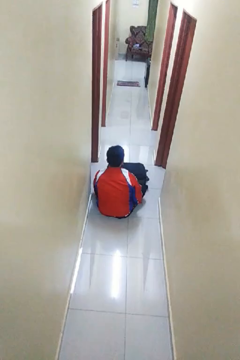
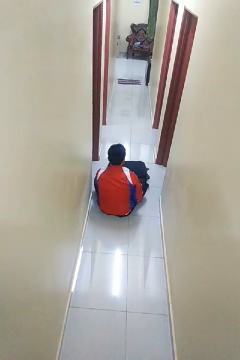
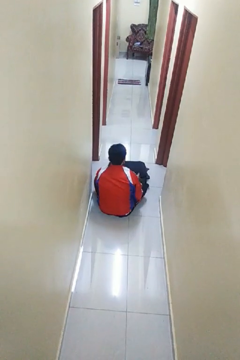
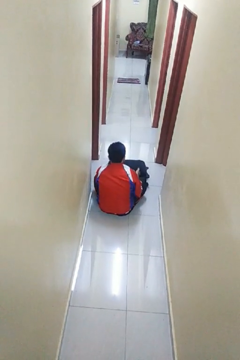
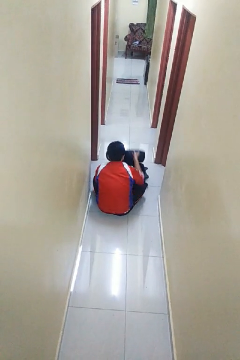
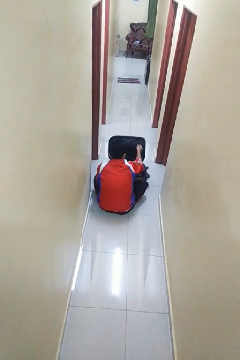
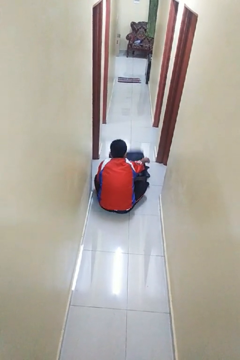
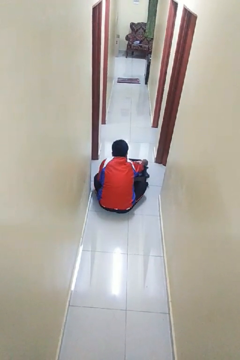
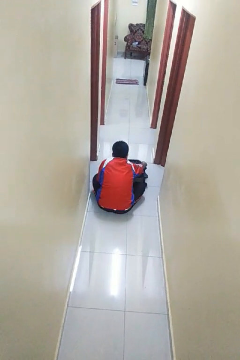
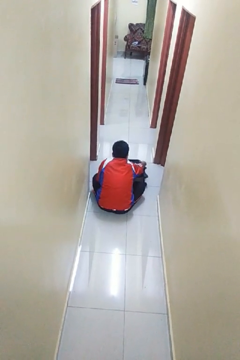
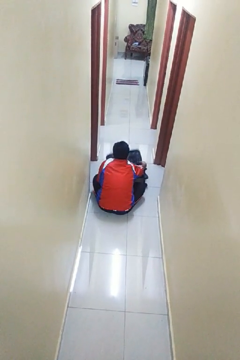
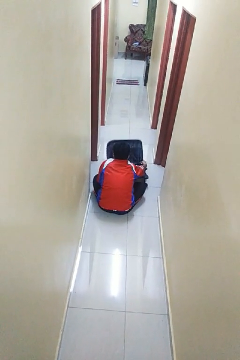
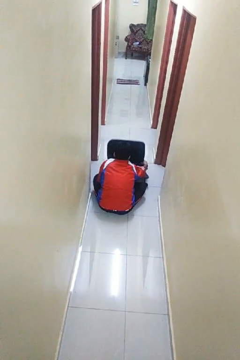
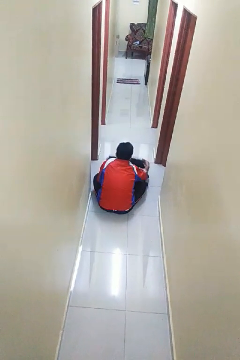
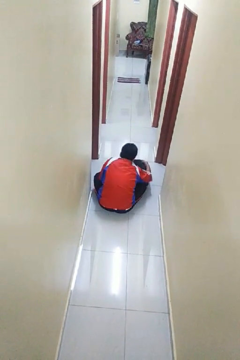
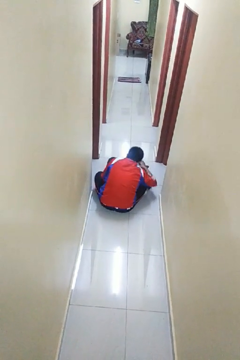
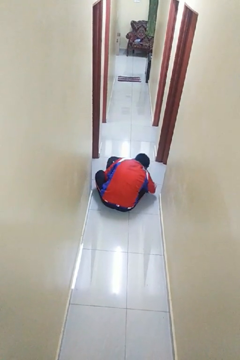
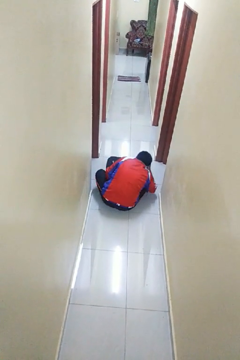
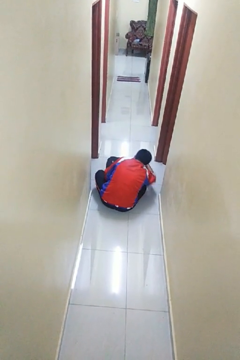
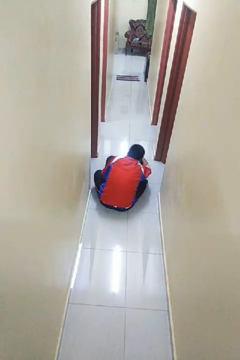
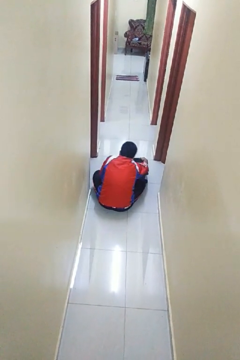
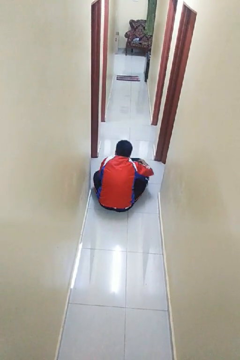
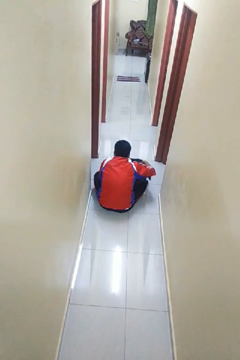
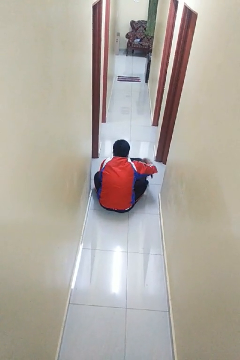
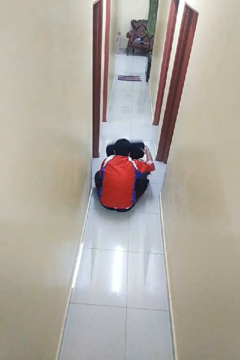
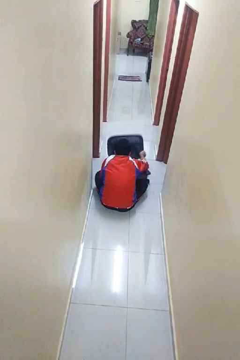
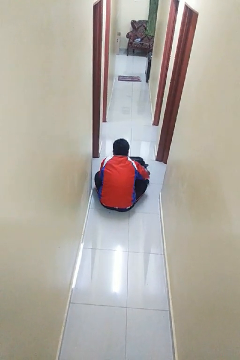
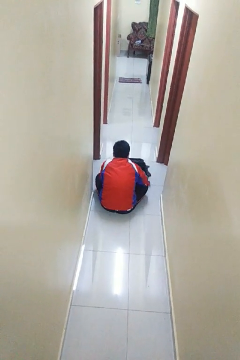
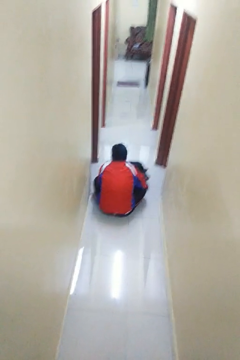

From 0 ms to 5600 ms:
person opens suitcase

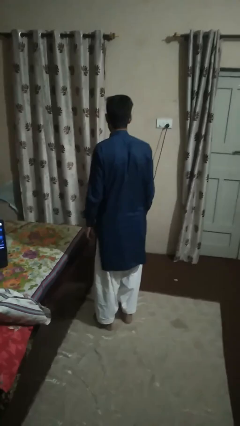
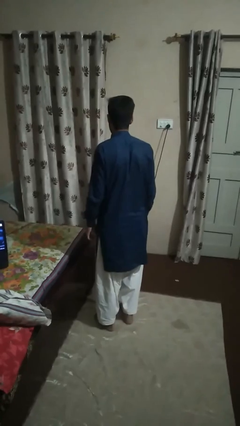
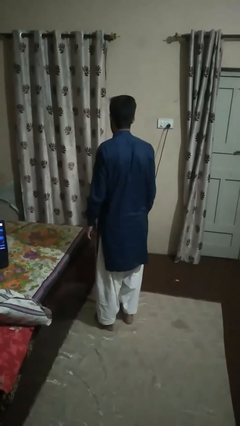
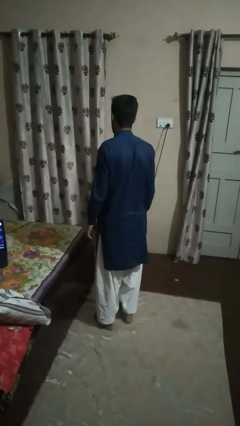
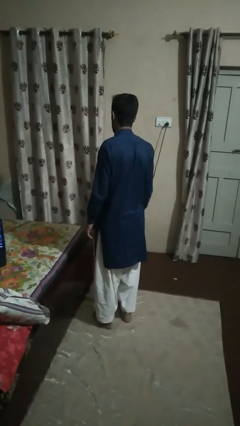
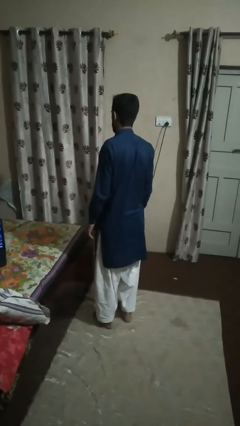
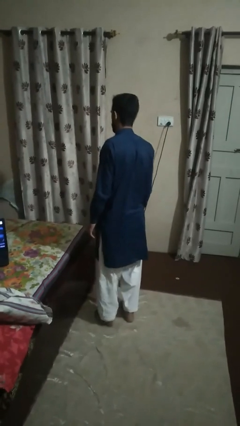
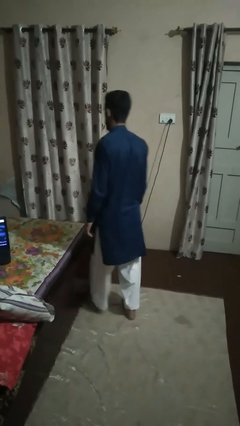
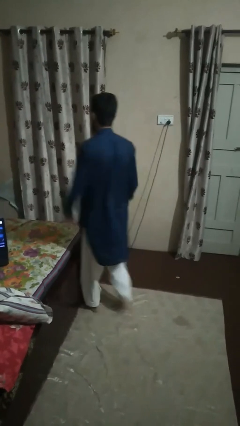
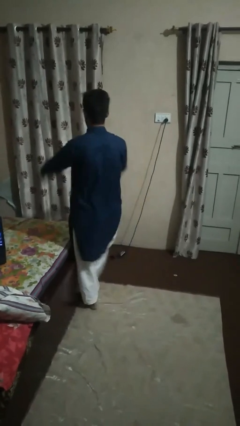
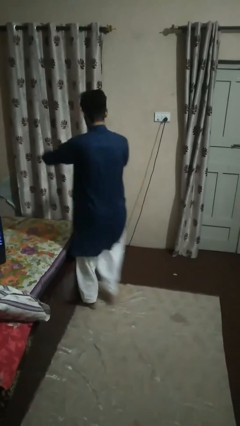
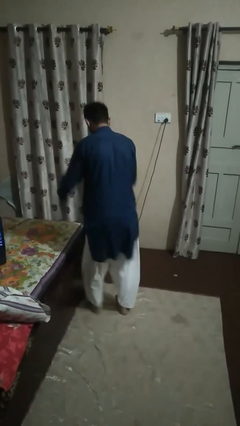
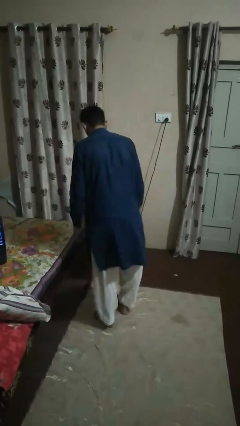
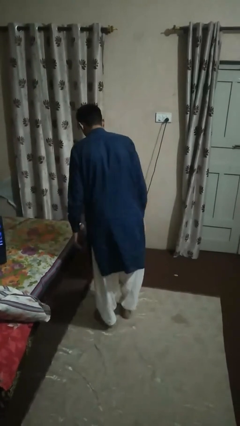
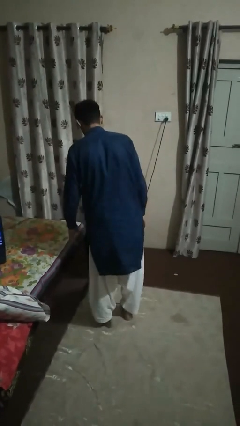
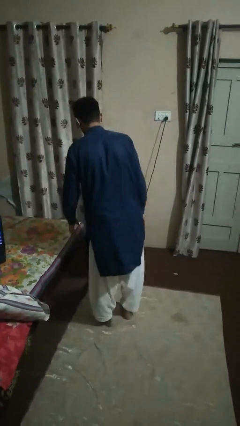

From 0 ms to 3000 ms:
person stubs toe

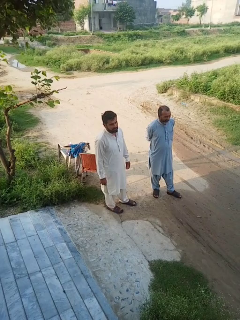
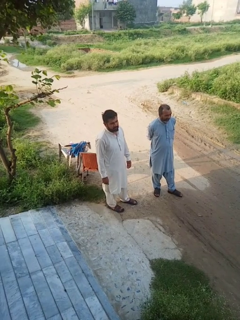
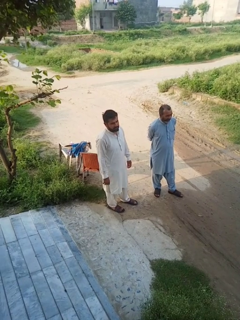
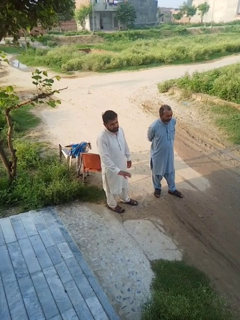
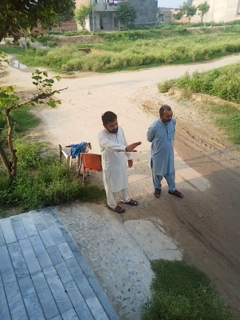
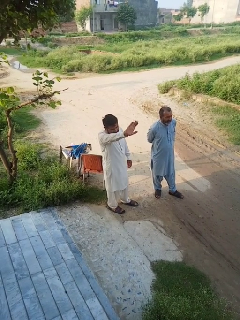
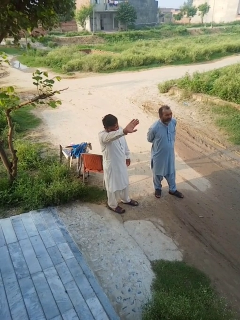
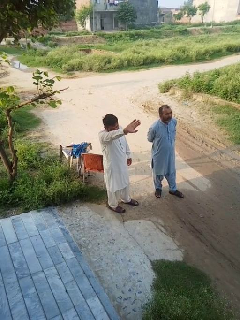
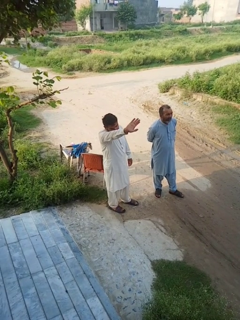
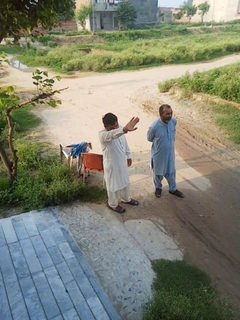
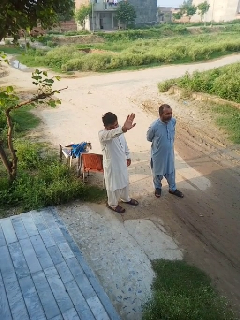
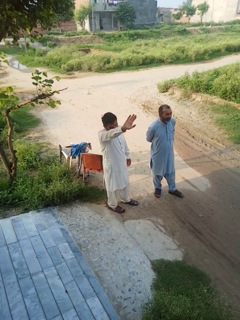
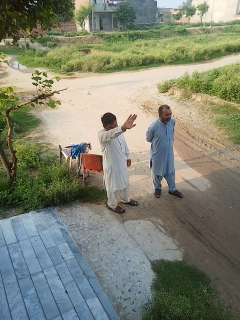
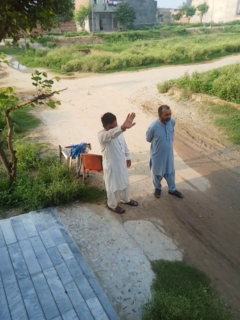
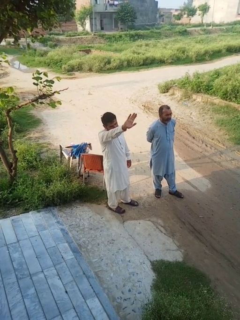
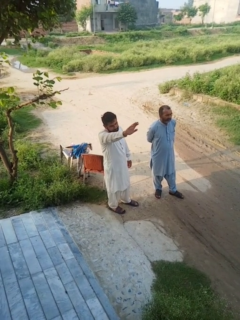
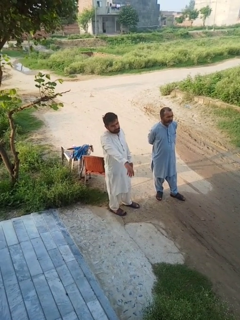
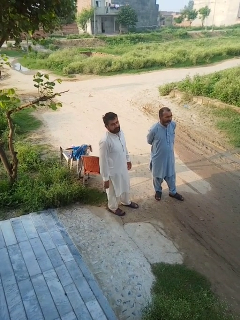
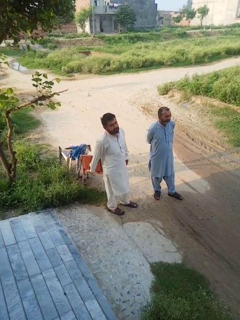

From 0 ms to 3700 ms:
person waves at person

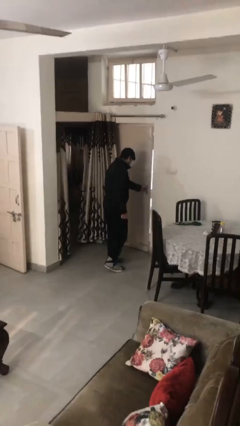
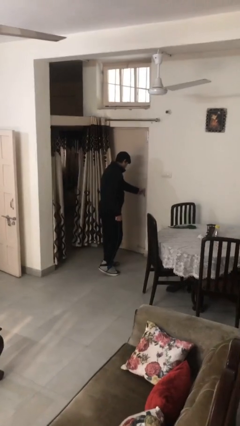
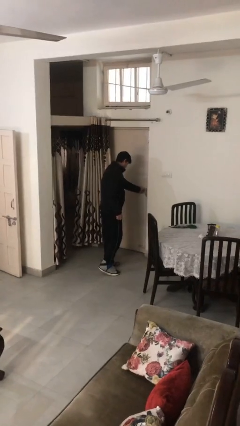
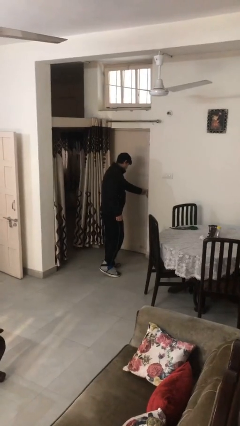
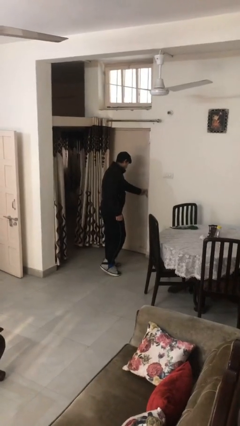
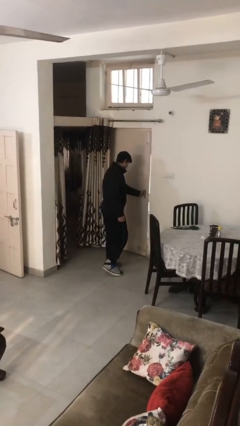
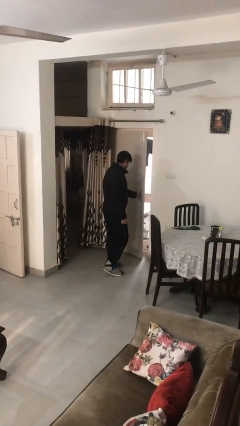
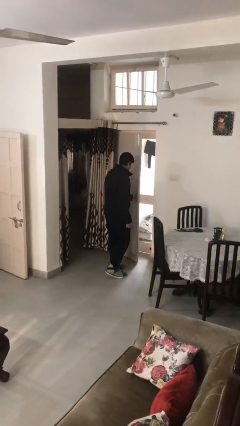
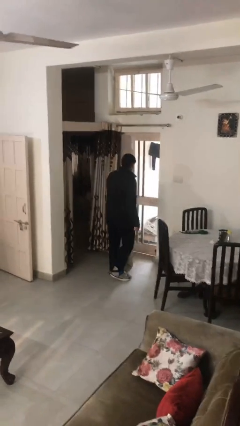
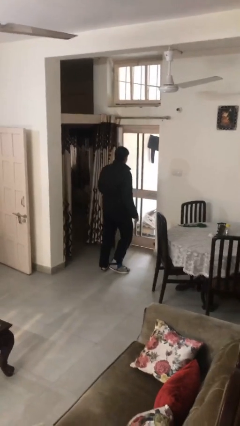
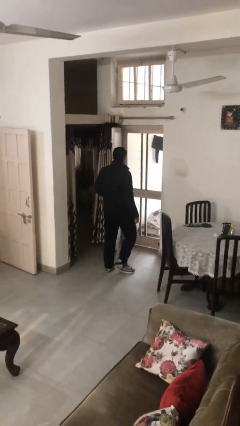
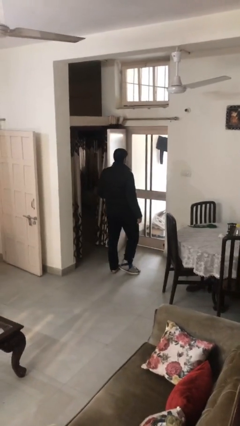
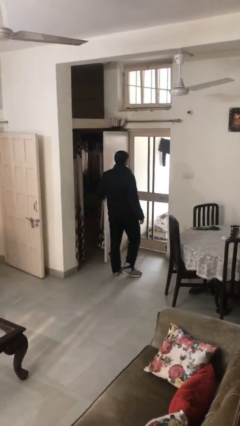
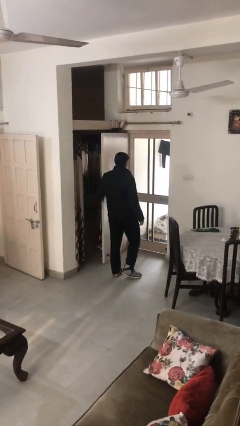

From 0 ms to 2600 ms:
person opens facility door

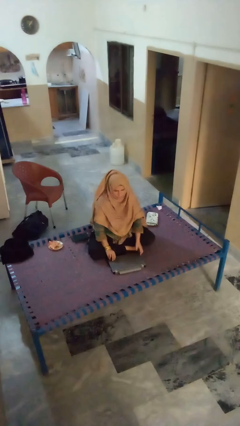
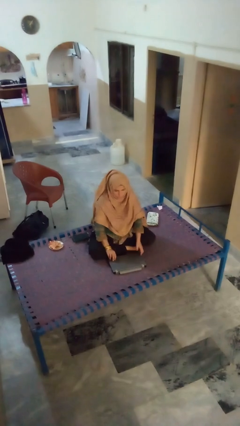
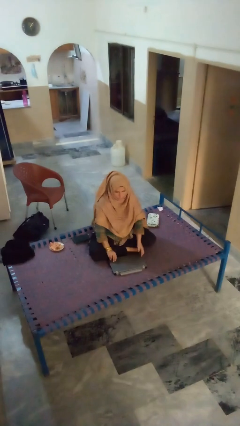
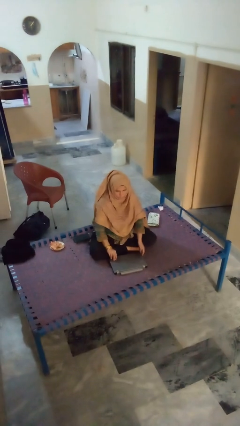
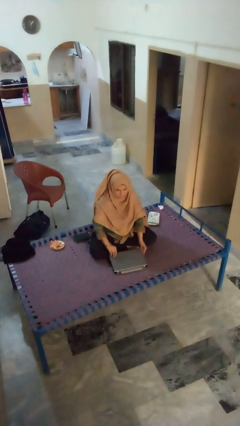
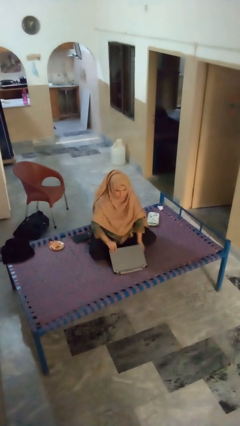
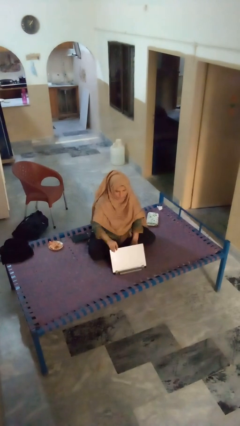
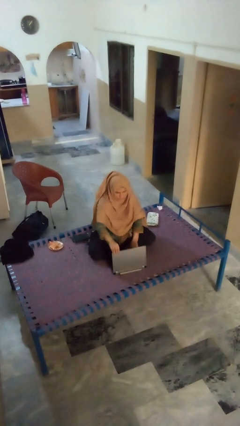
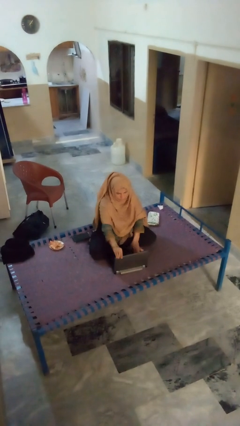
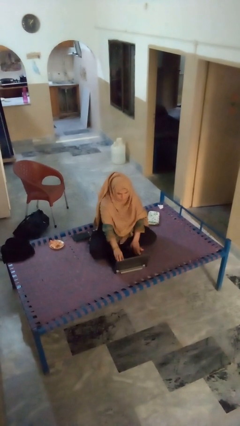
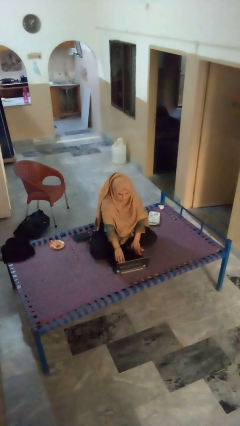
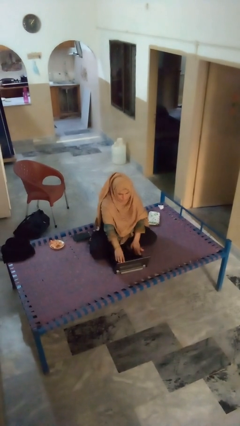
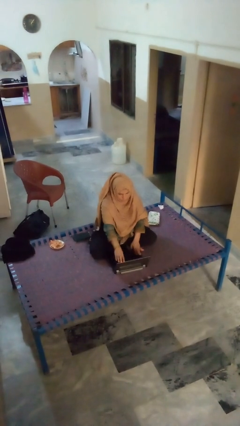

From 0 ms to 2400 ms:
person opens laptop

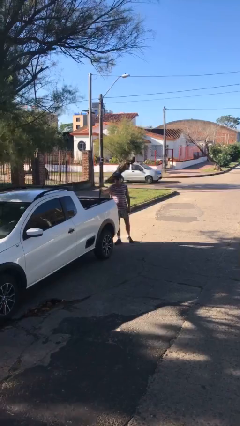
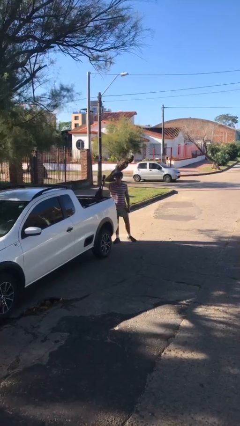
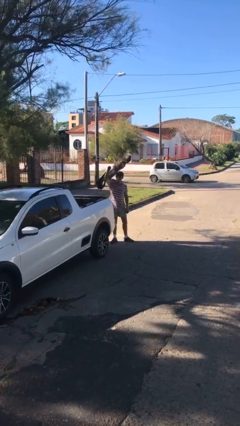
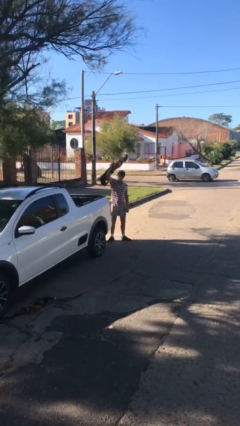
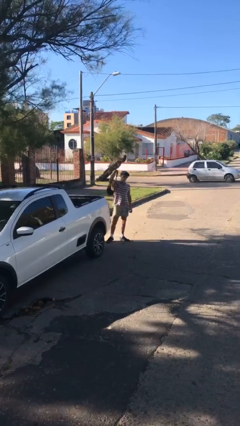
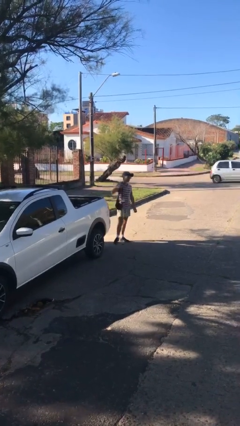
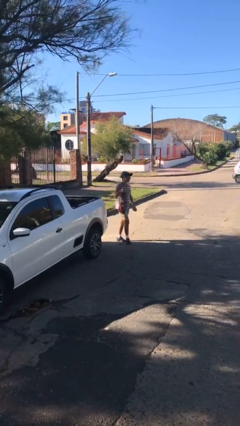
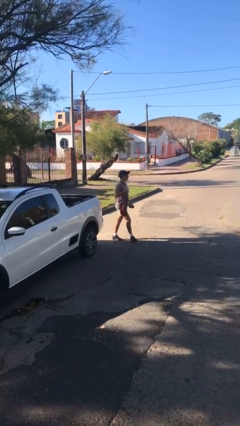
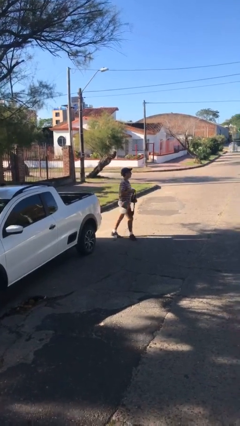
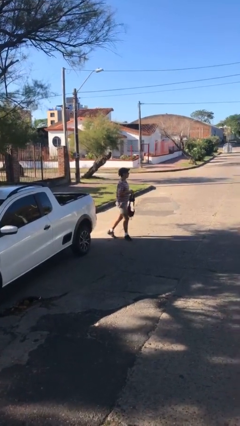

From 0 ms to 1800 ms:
person unloads car
